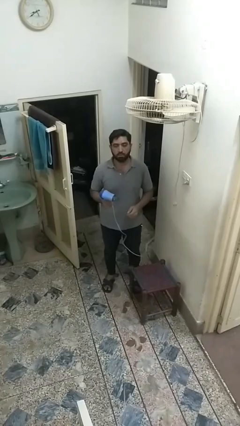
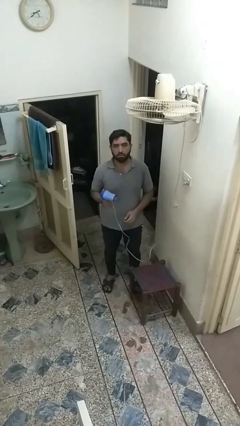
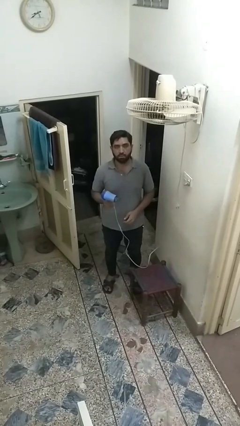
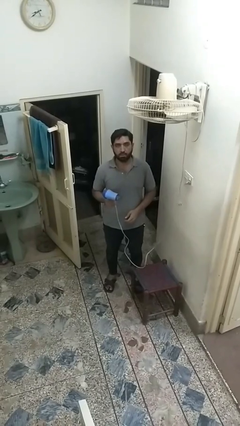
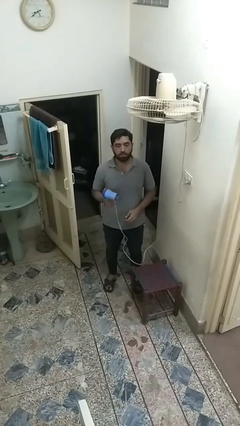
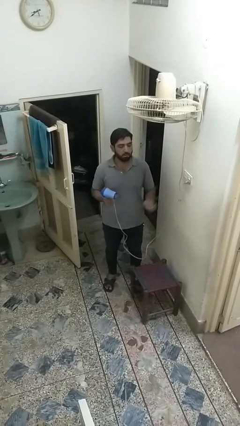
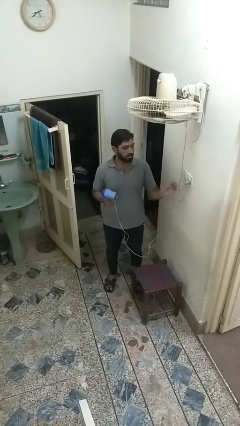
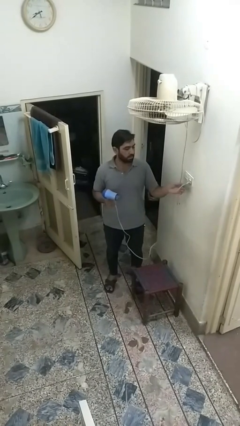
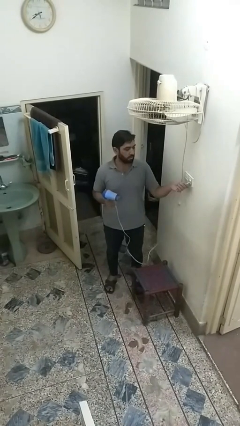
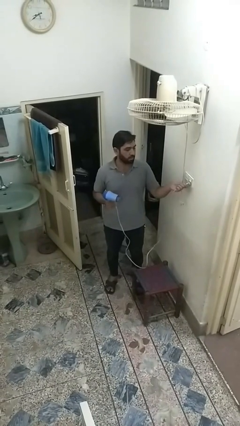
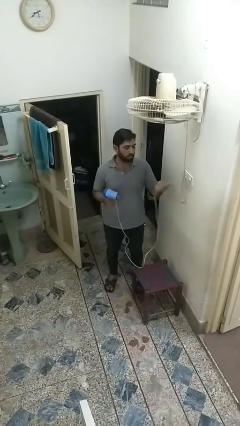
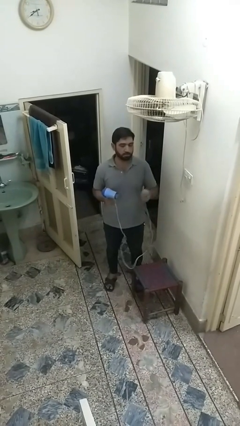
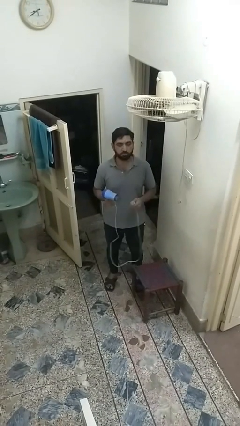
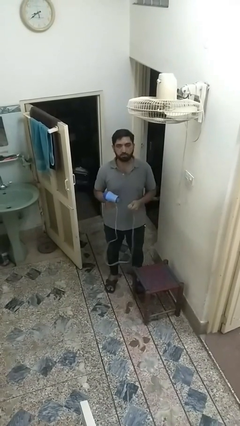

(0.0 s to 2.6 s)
person unplugs from electrical socket

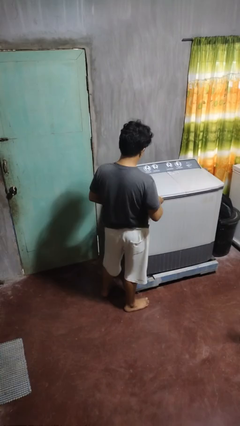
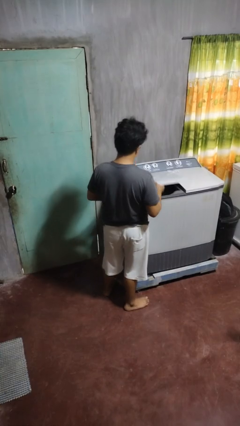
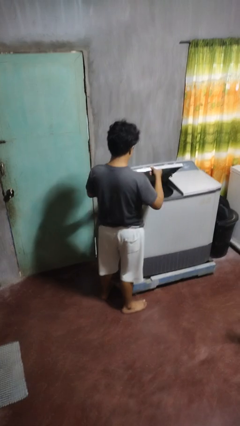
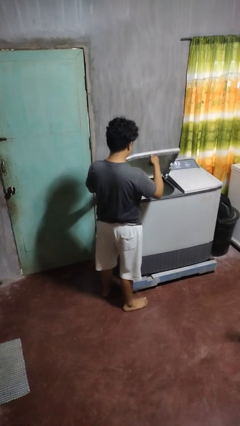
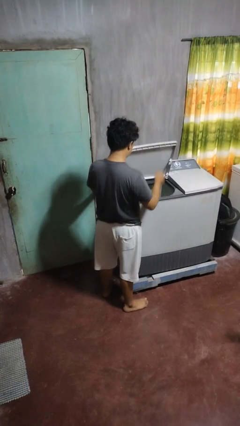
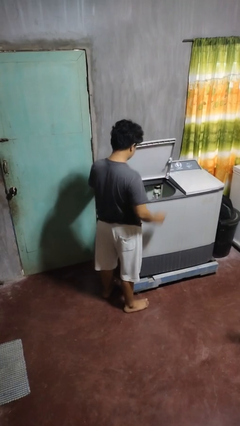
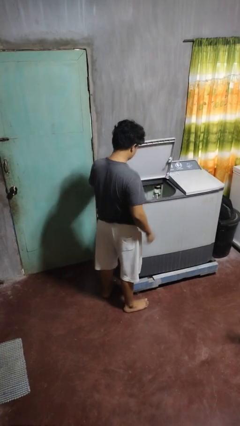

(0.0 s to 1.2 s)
person opens clothes washer

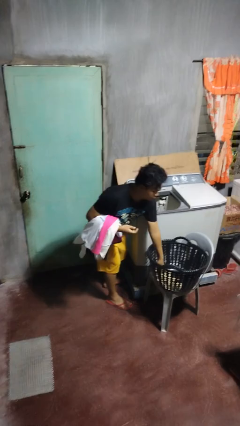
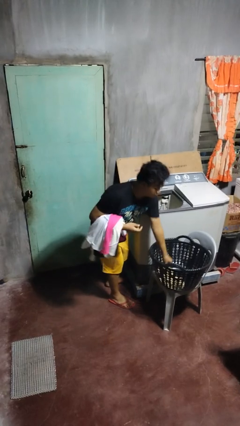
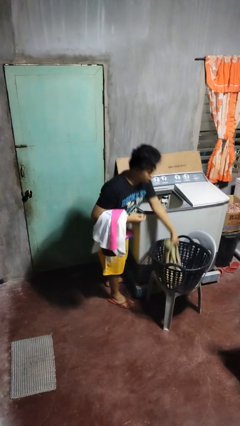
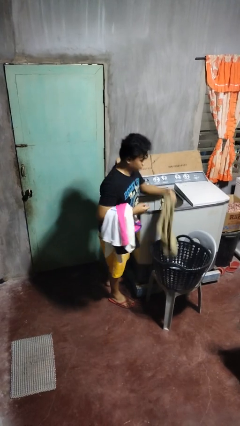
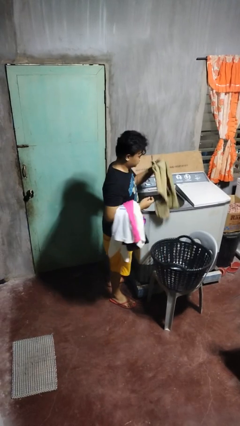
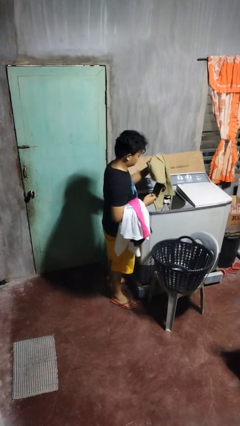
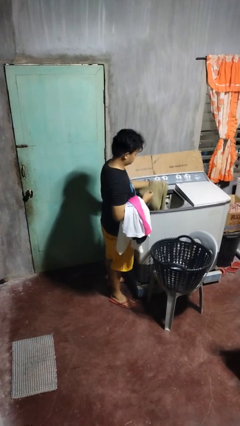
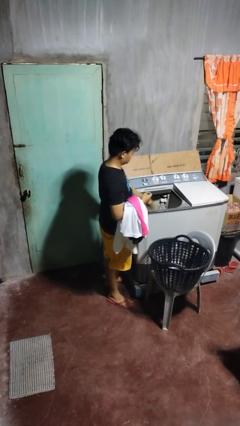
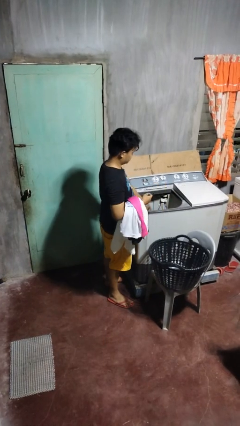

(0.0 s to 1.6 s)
person loads clotheswasher

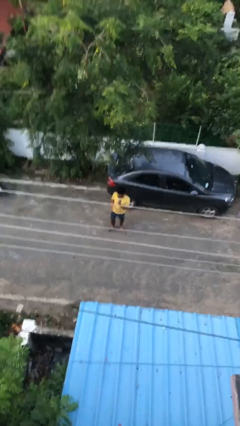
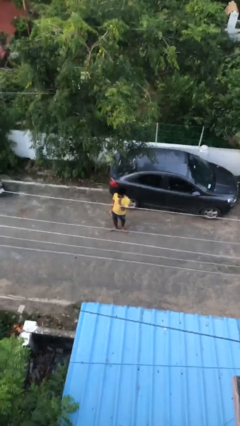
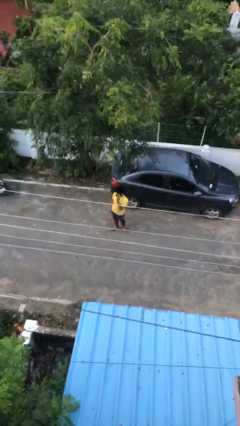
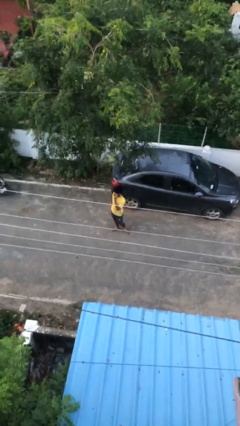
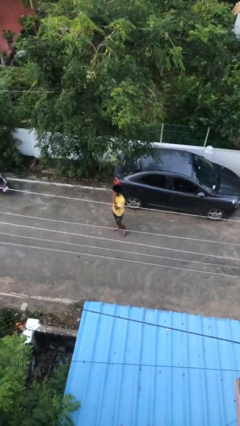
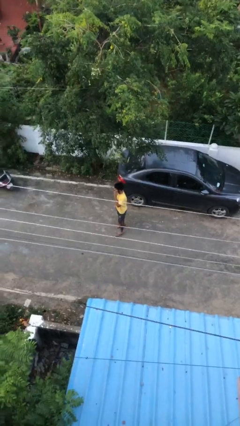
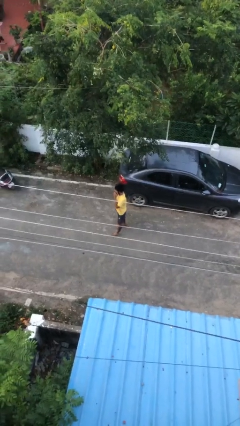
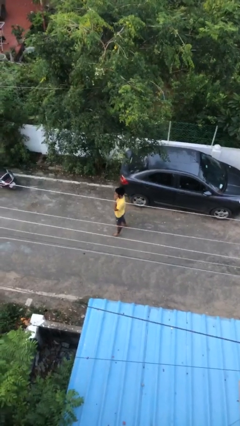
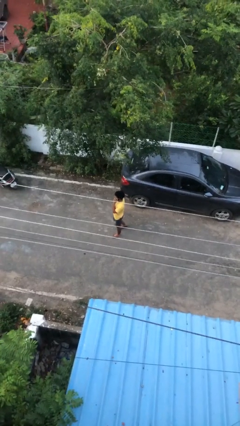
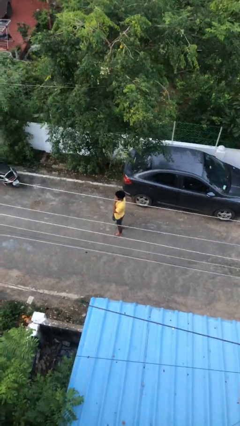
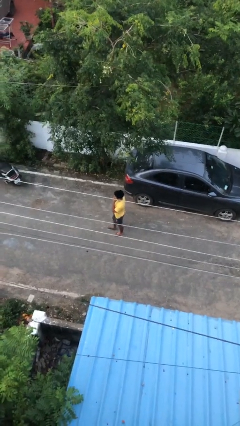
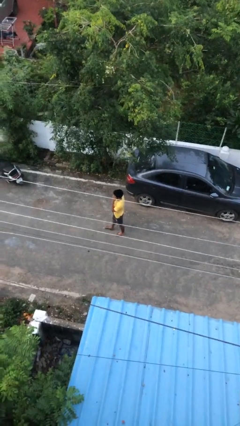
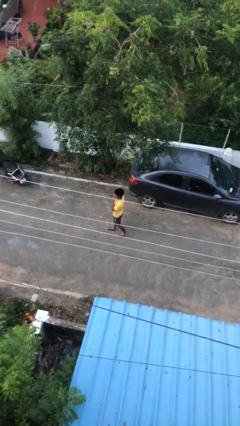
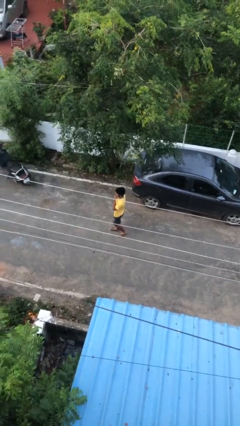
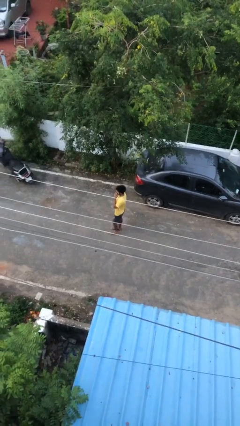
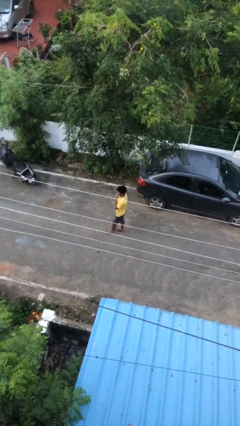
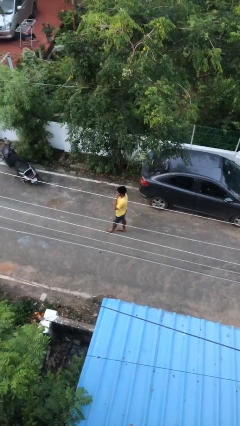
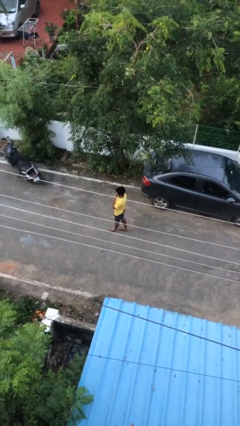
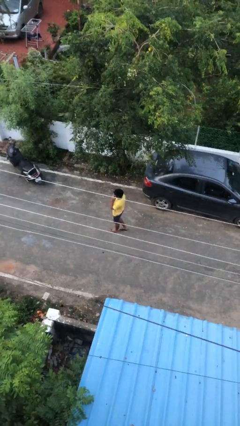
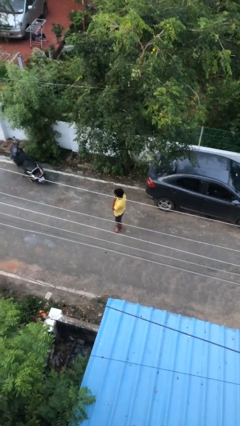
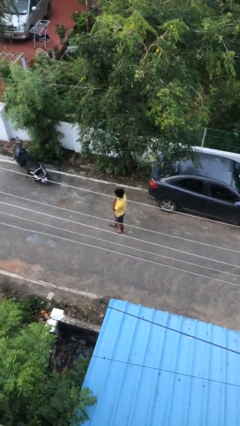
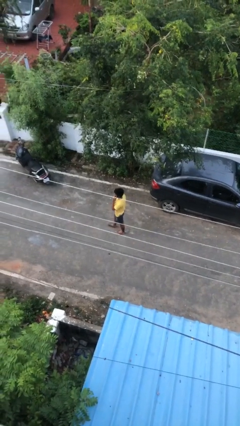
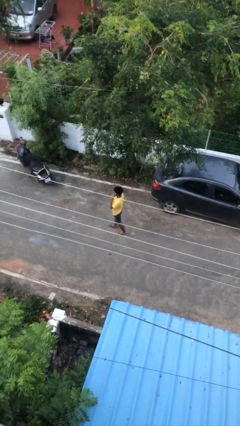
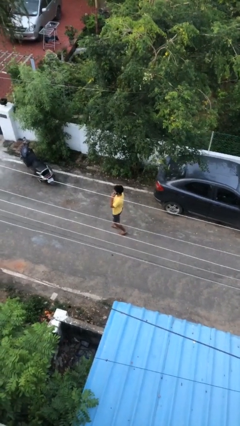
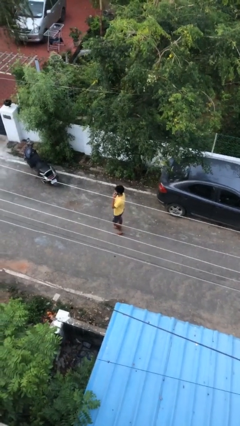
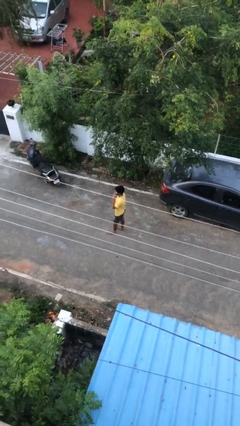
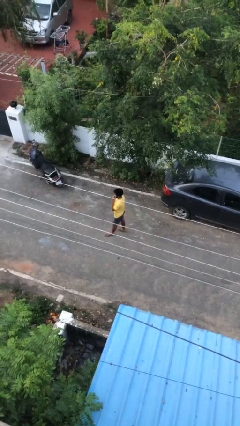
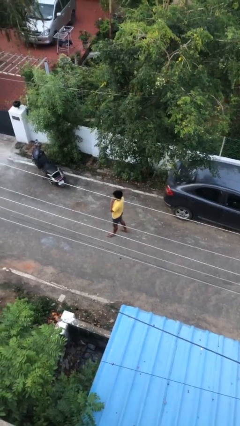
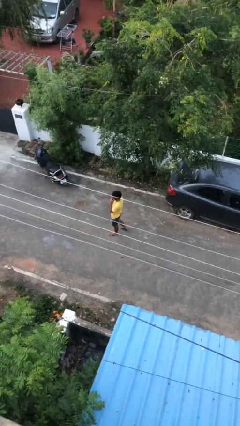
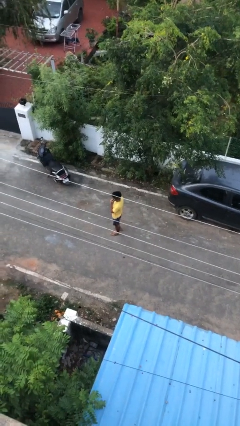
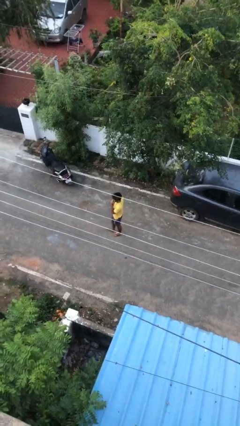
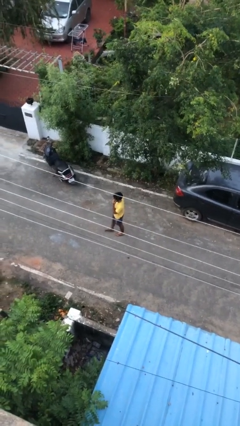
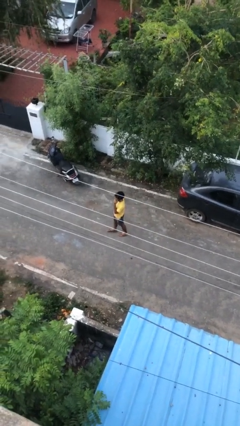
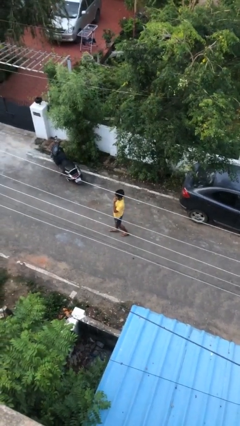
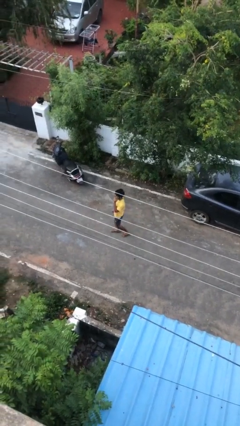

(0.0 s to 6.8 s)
person talks on phone

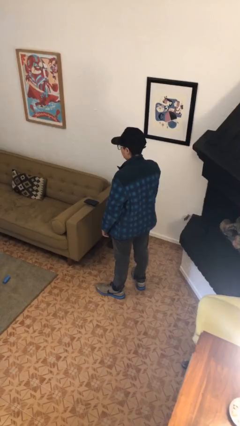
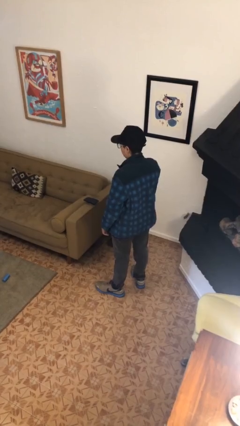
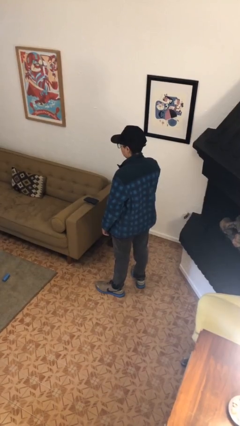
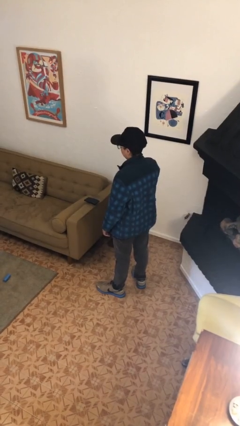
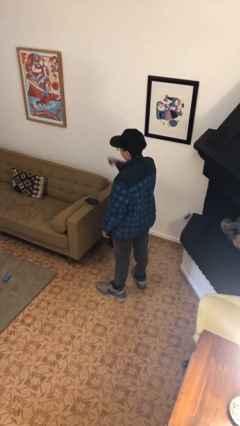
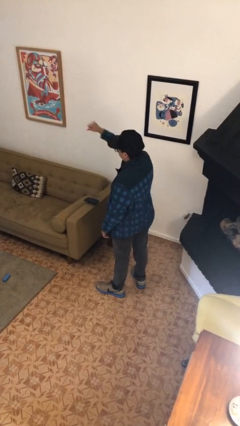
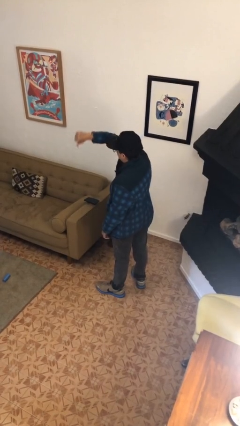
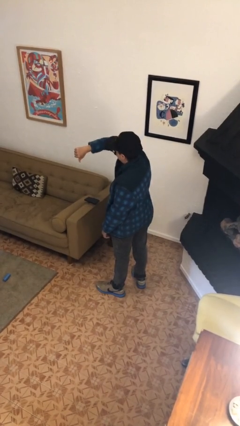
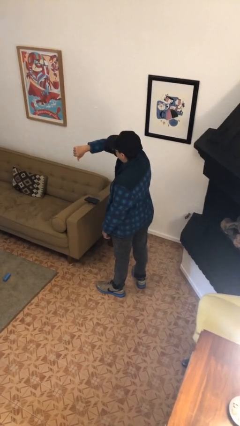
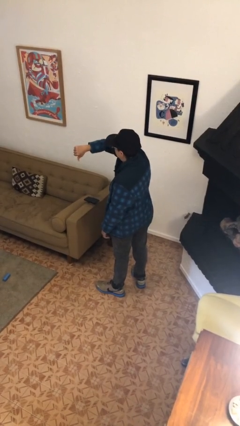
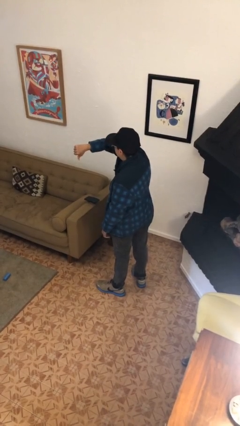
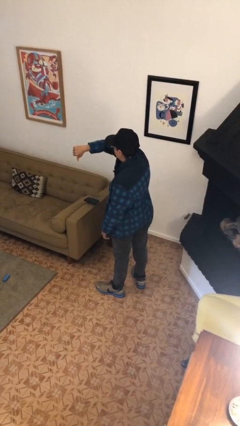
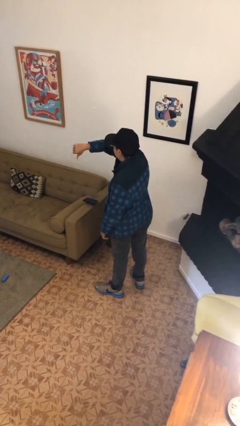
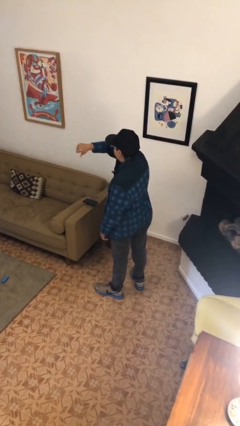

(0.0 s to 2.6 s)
person gestures thumbs down

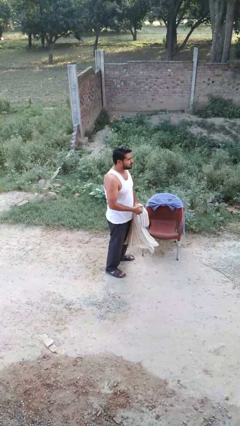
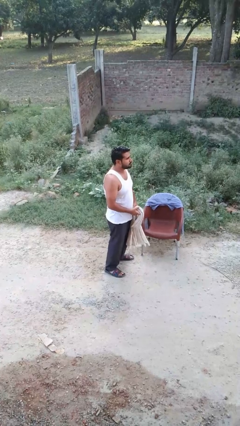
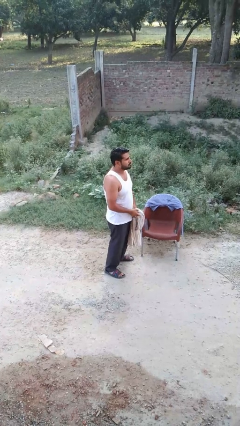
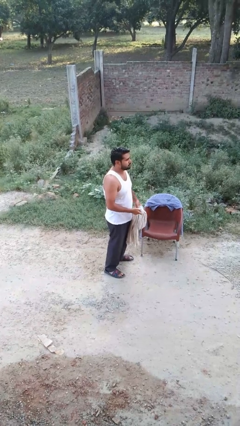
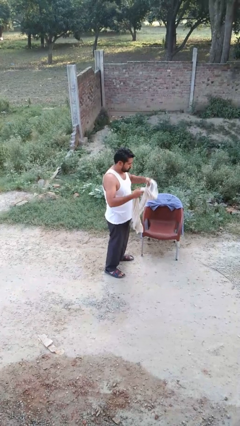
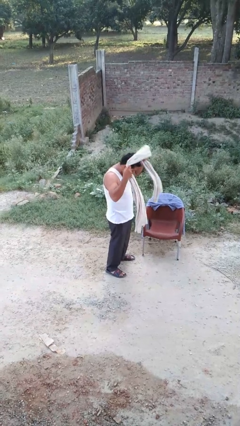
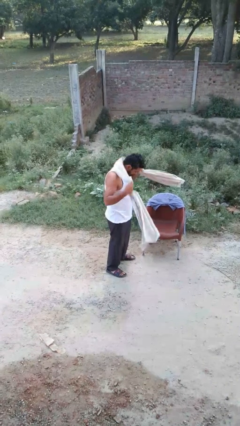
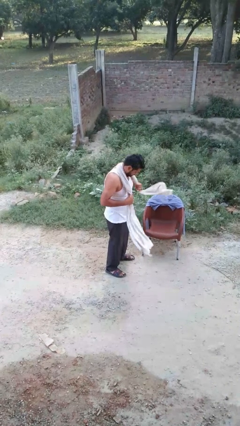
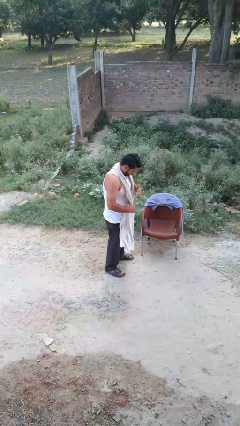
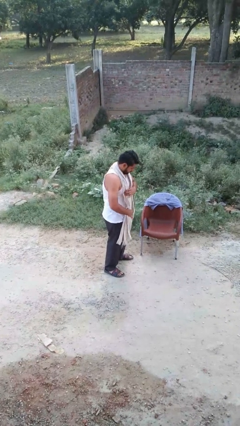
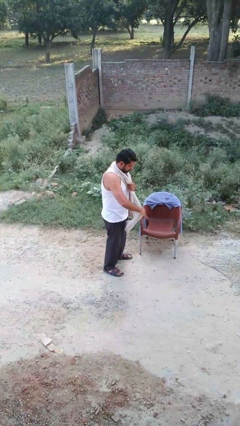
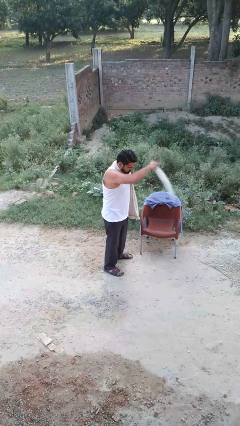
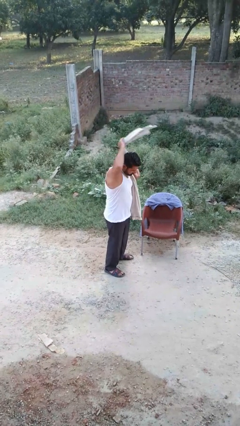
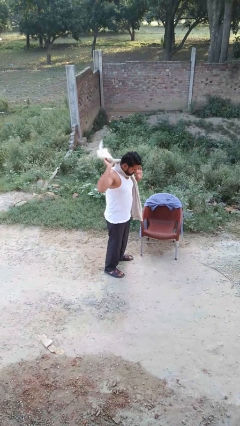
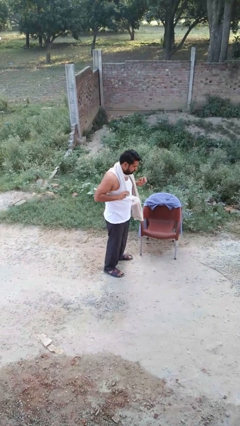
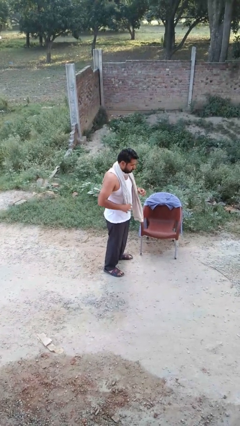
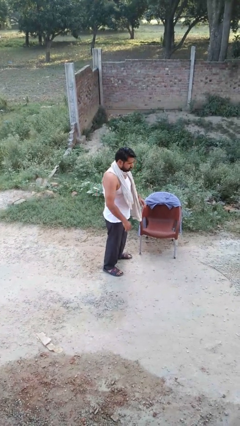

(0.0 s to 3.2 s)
person puts on scarf
